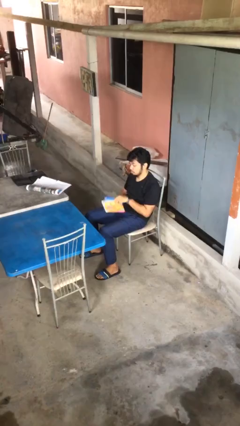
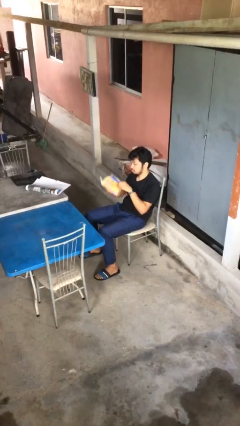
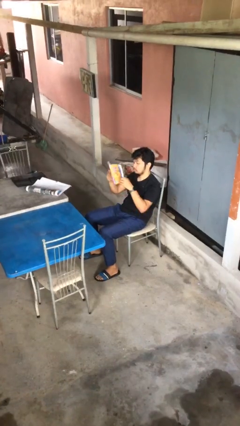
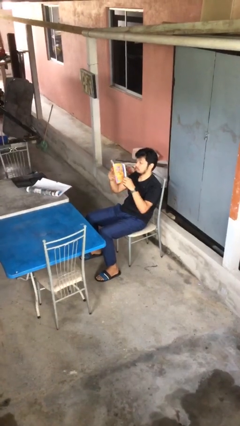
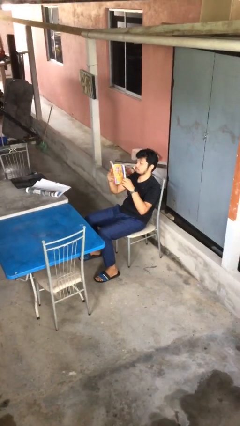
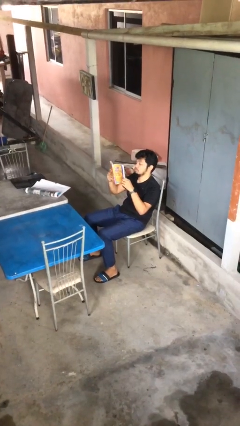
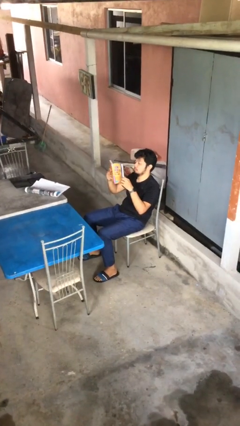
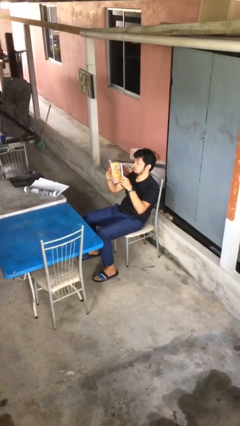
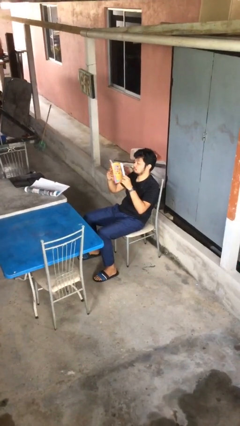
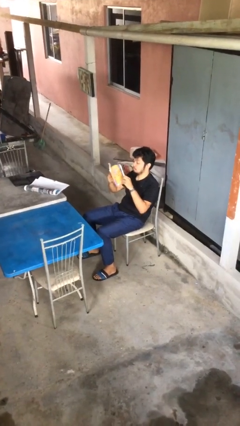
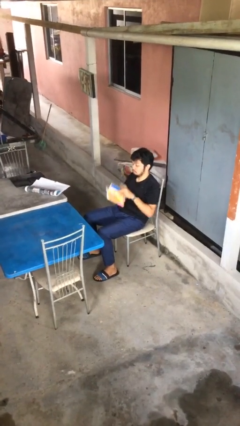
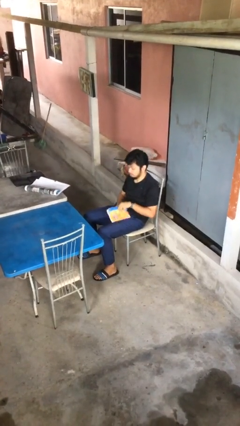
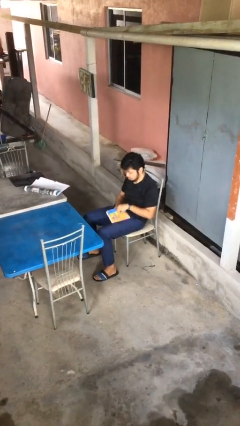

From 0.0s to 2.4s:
person reads book

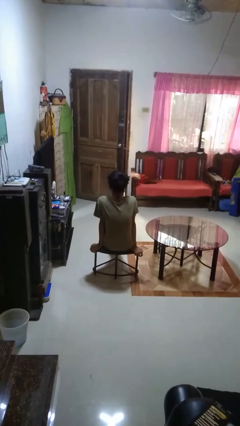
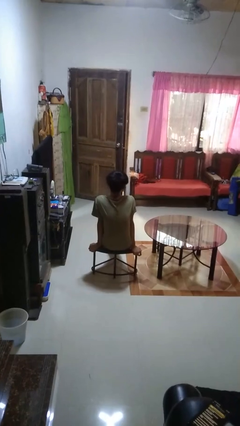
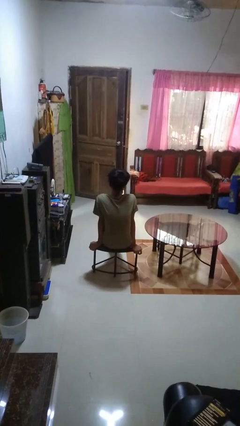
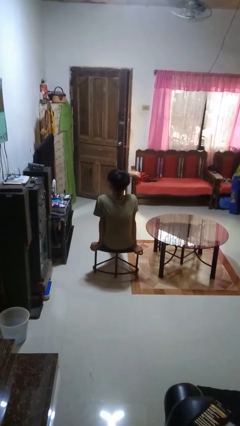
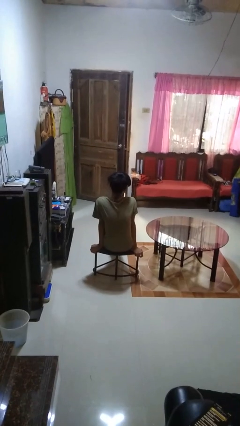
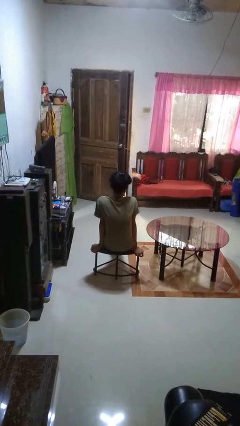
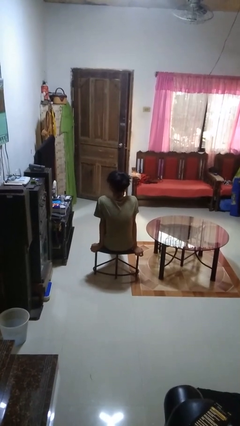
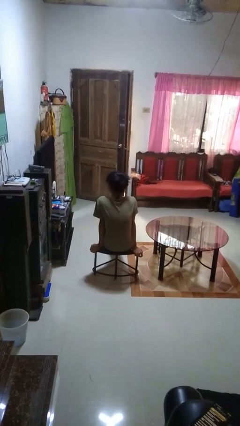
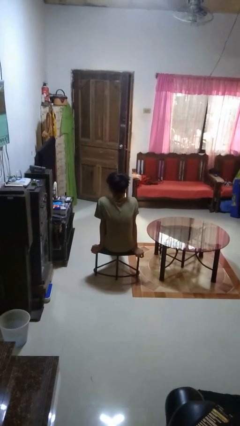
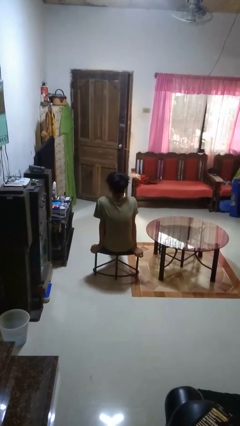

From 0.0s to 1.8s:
person shakes head

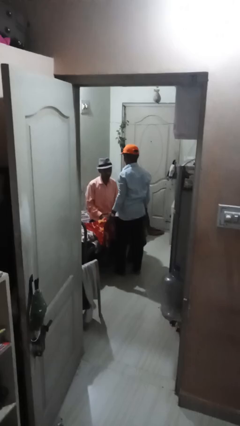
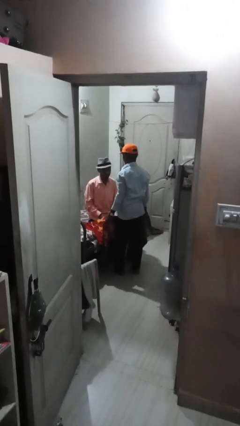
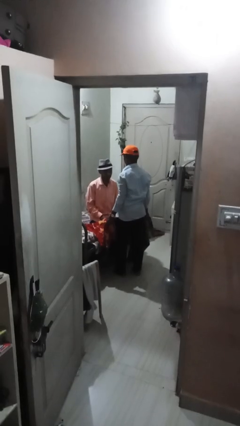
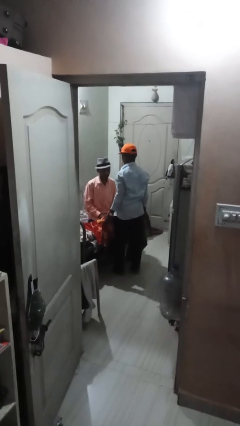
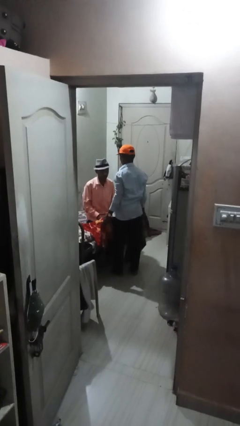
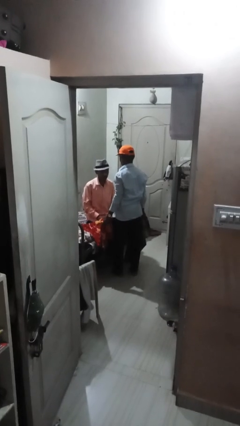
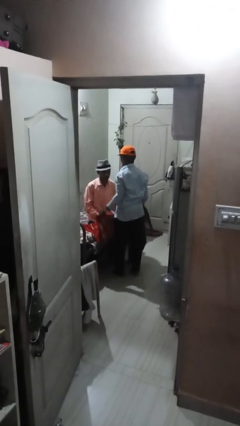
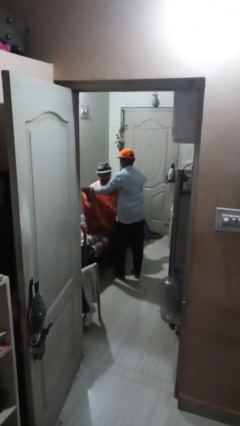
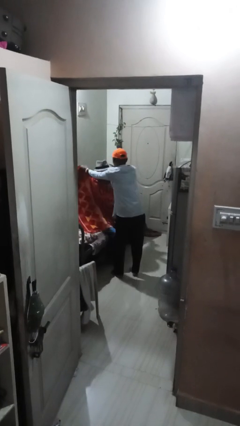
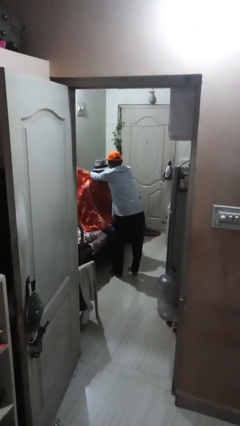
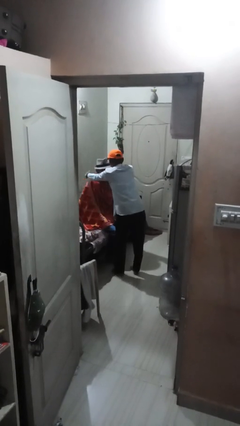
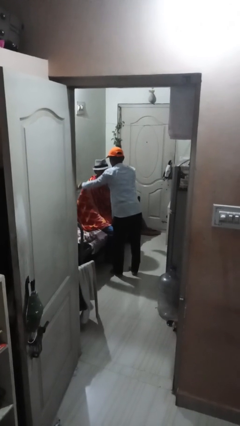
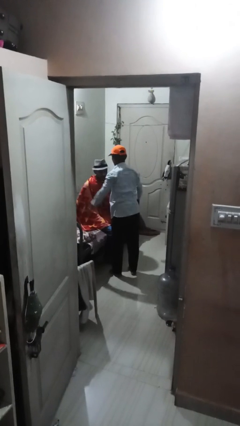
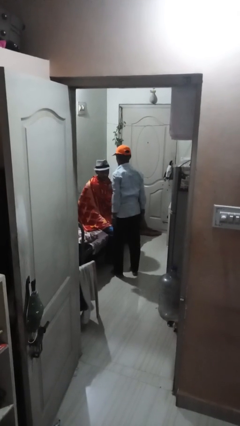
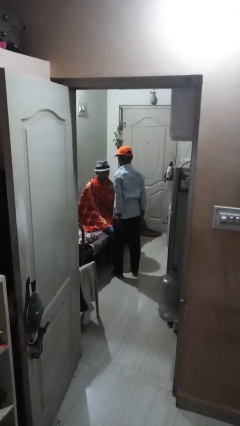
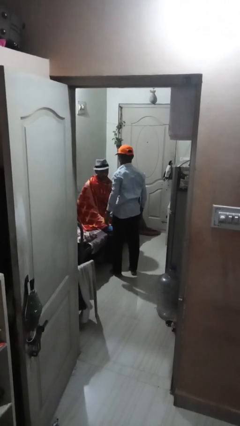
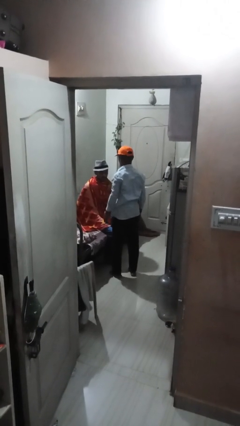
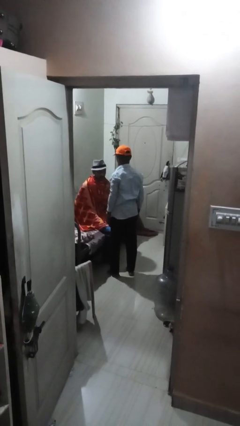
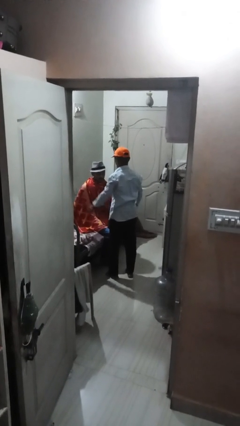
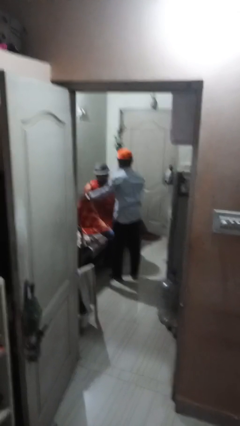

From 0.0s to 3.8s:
person covers friend with blanket

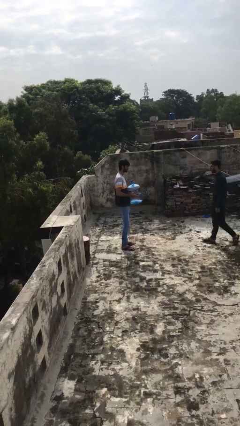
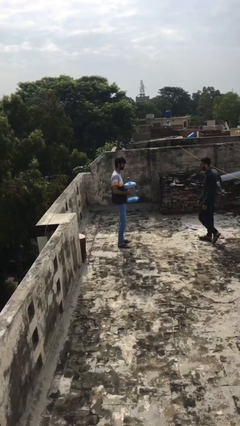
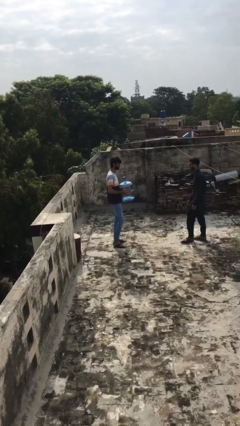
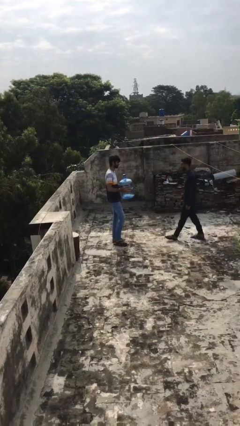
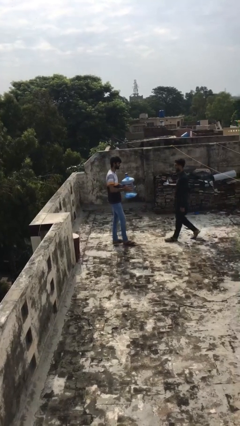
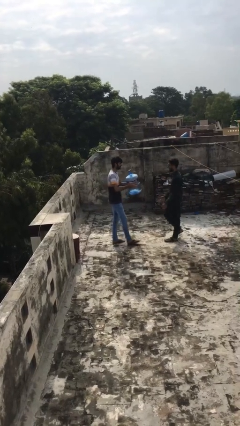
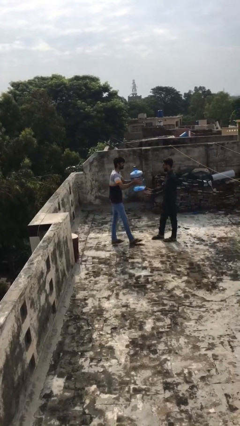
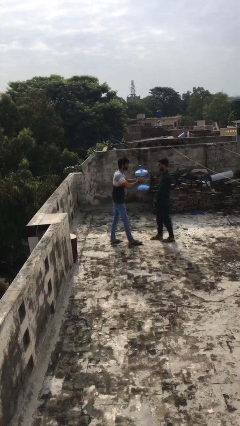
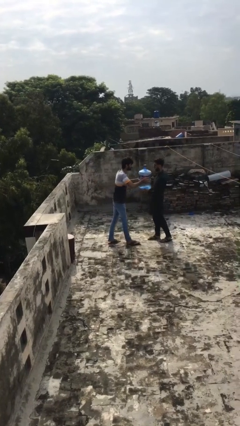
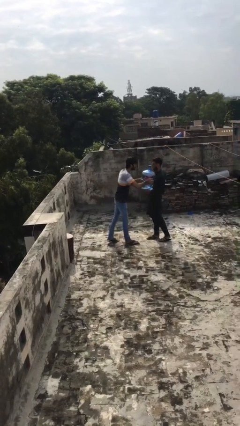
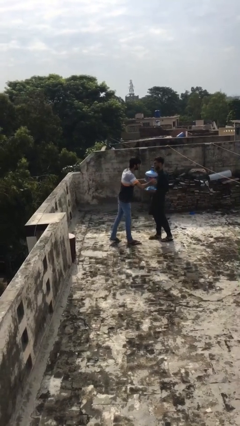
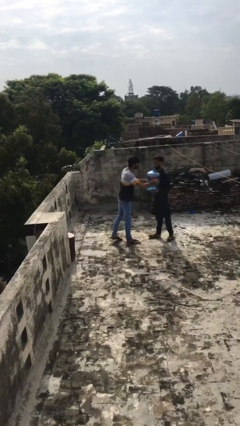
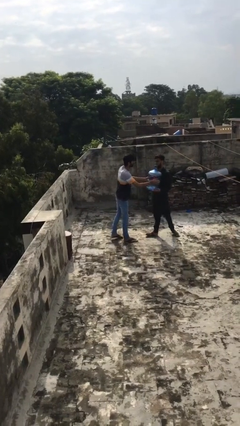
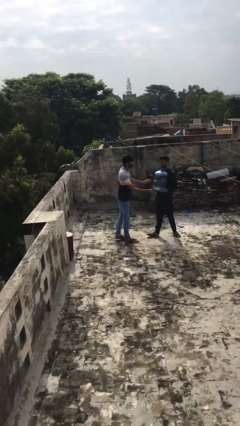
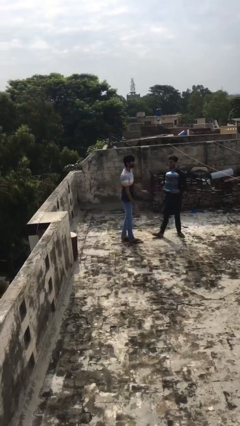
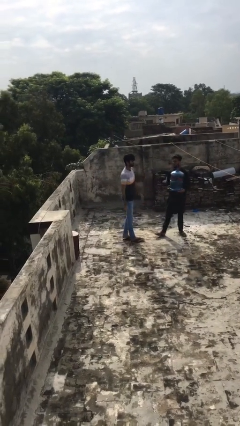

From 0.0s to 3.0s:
person transfers object to person

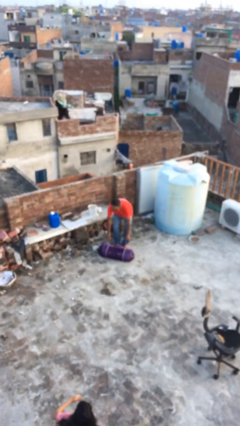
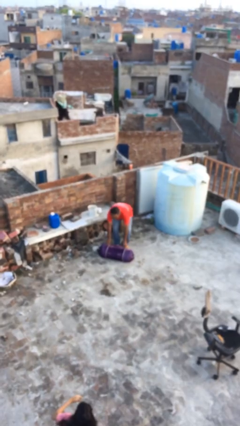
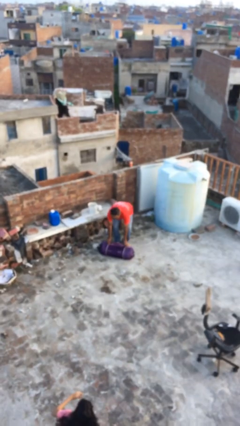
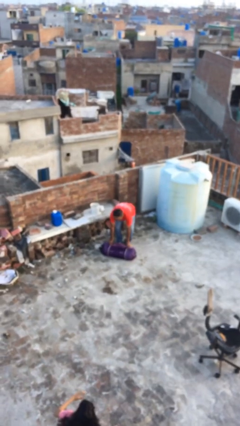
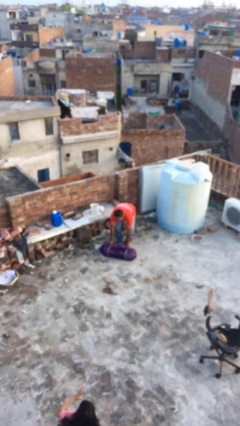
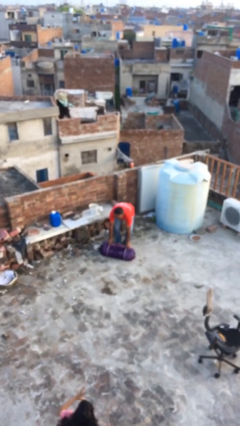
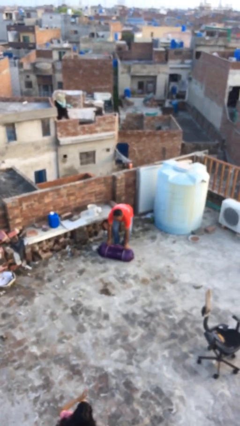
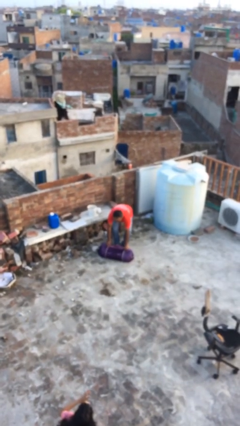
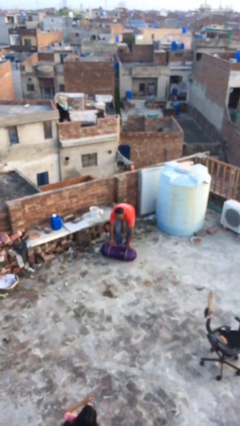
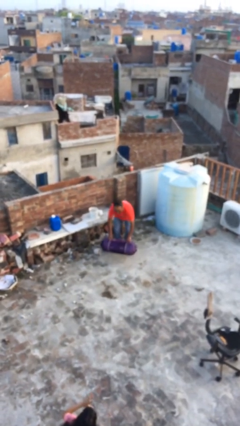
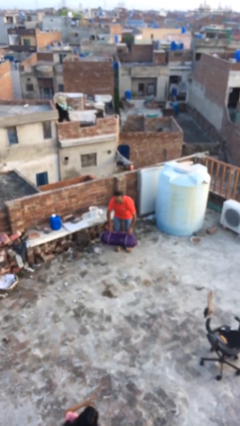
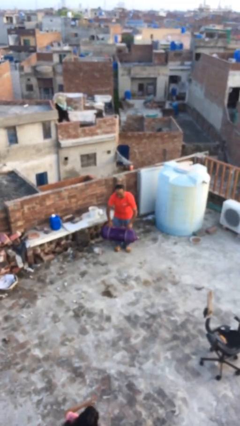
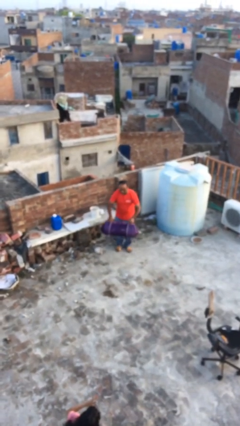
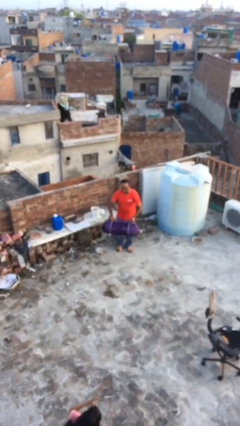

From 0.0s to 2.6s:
person picks up object from floor

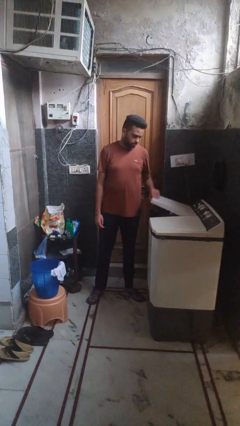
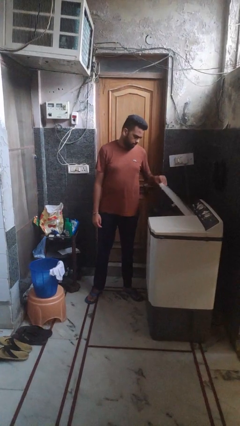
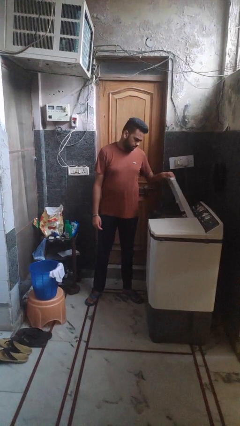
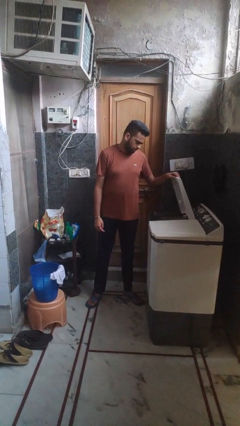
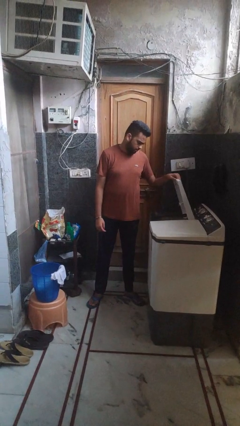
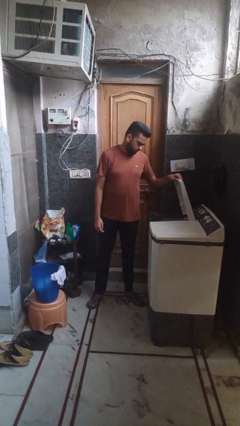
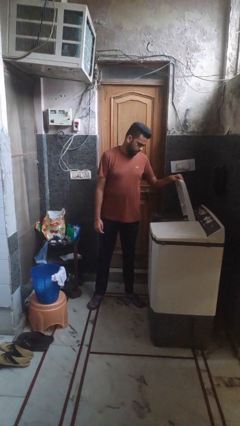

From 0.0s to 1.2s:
person opens clothes washer

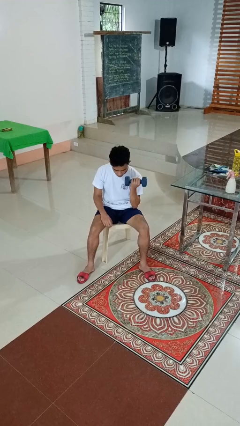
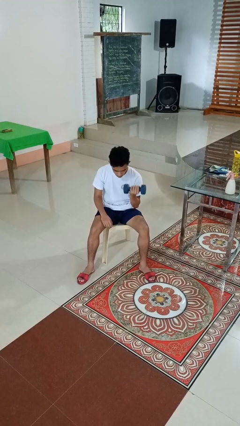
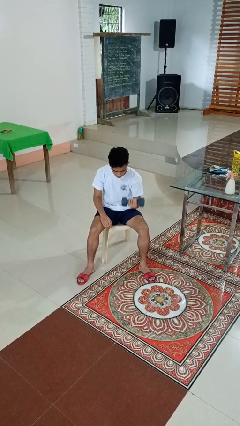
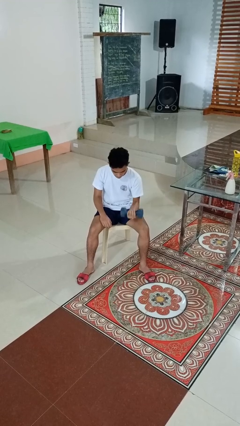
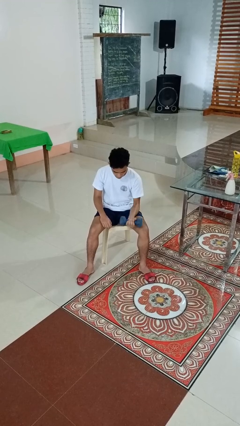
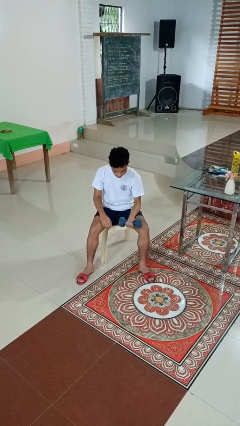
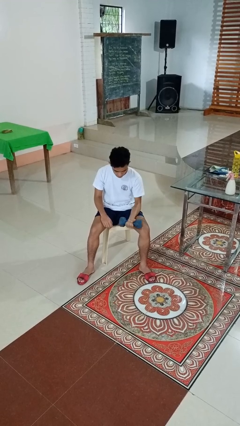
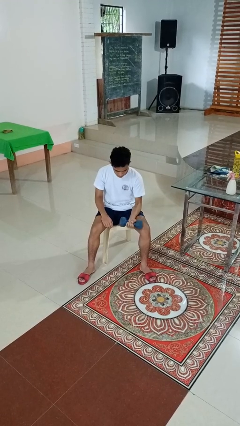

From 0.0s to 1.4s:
person lifts dumbbells

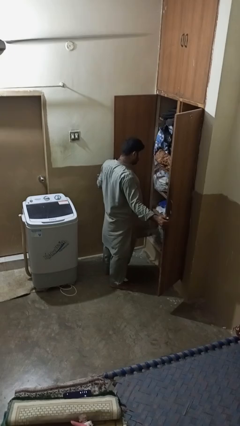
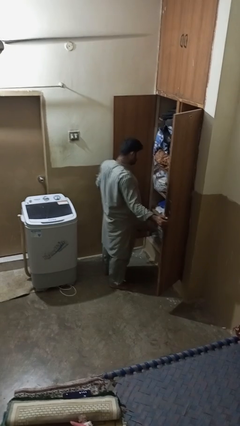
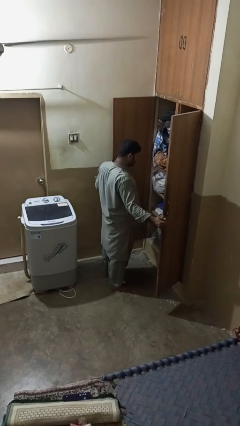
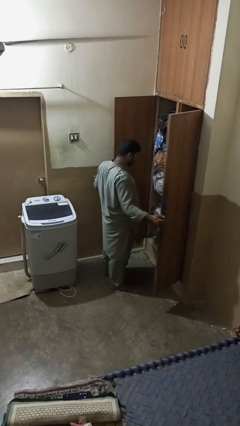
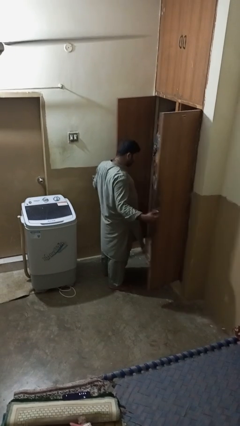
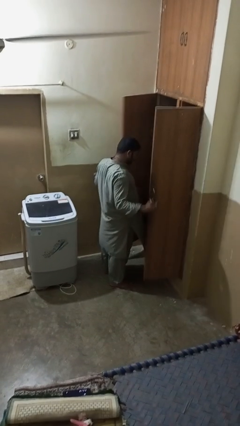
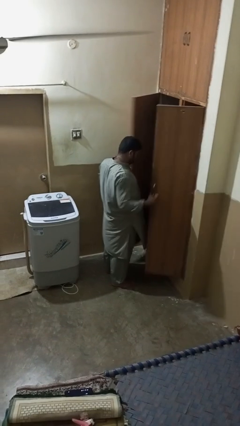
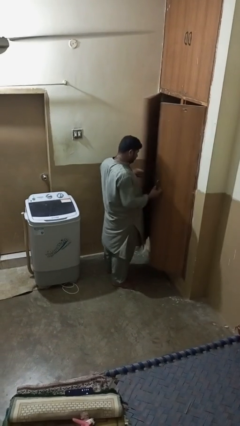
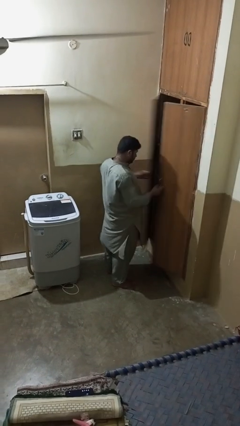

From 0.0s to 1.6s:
person closes closet door
